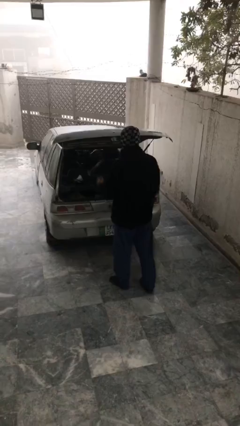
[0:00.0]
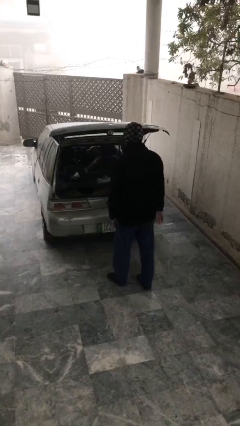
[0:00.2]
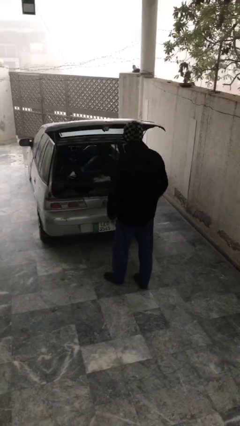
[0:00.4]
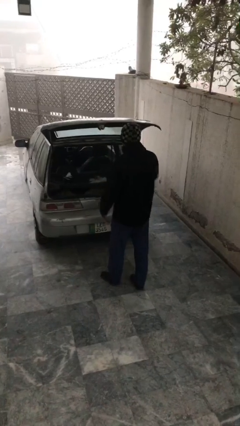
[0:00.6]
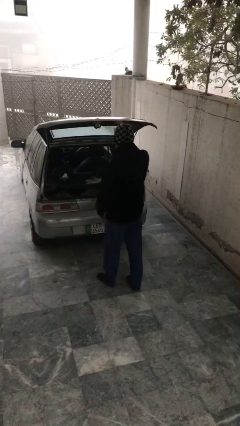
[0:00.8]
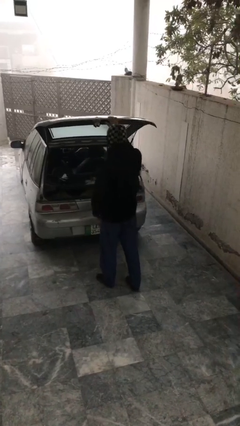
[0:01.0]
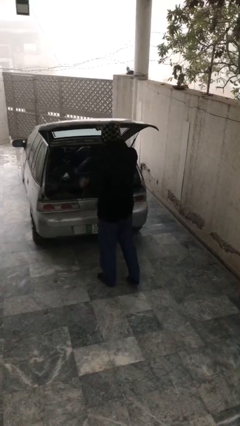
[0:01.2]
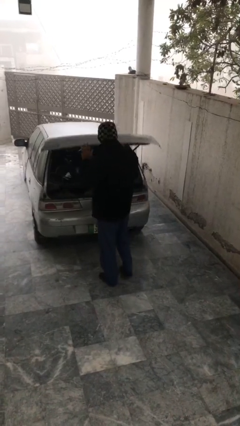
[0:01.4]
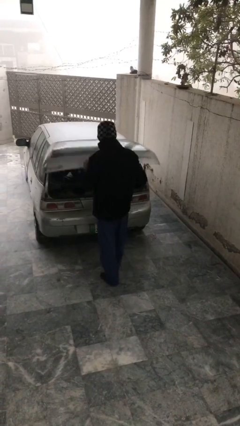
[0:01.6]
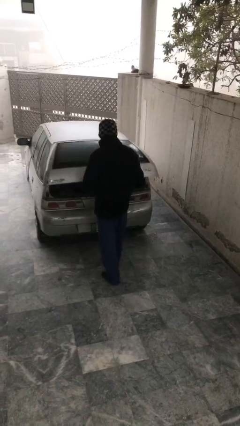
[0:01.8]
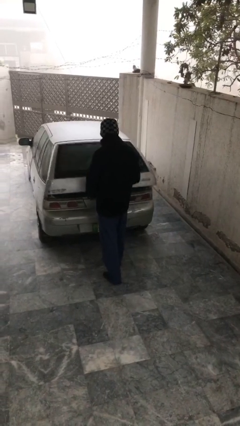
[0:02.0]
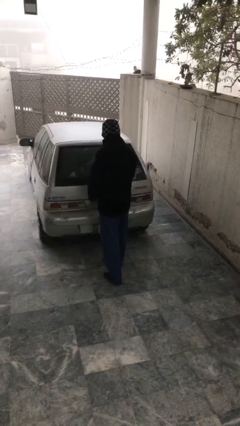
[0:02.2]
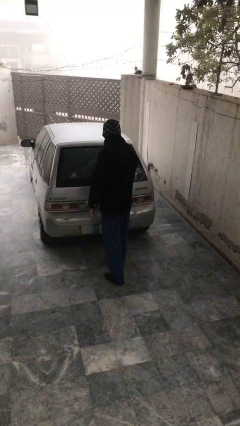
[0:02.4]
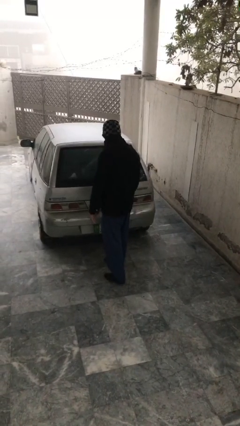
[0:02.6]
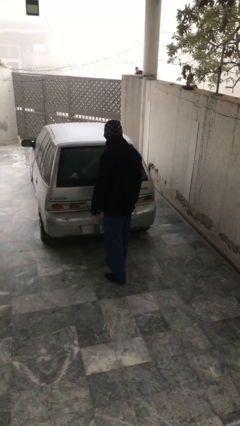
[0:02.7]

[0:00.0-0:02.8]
person closes car trunk

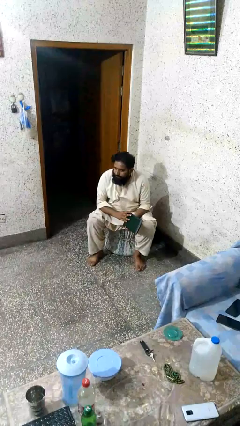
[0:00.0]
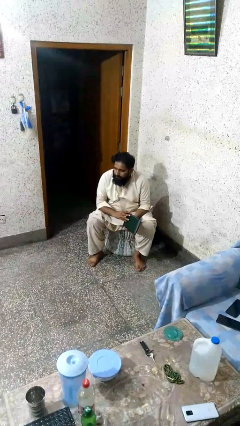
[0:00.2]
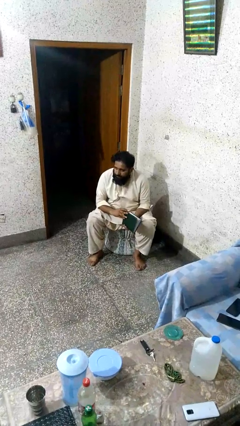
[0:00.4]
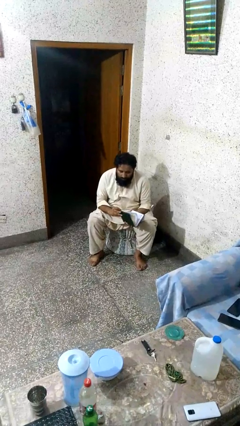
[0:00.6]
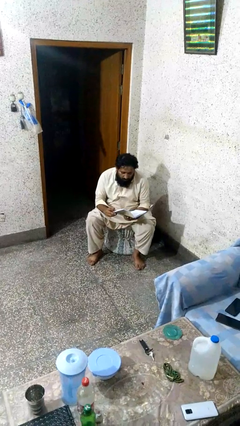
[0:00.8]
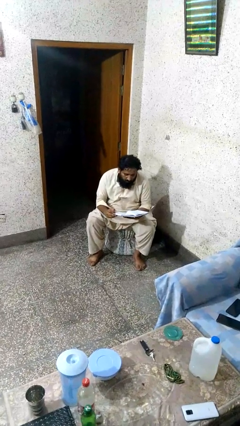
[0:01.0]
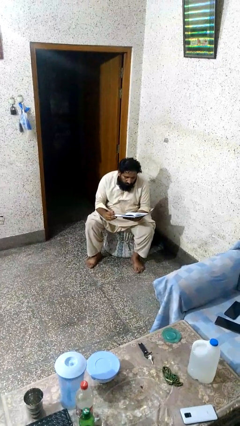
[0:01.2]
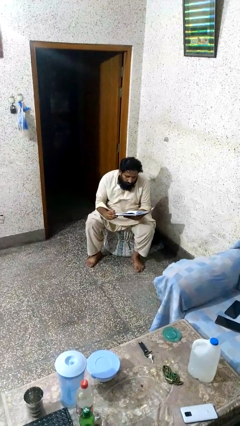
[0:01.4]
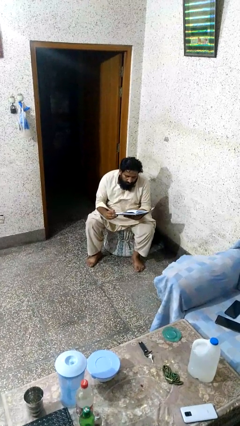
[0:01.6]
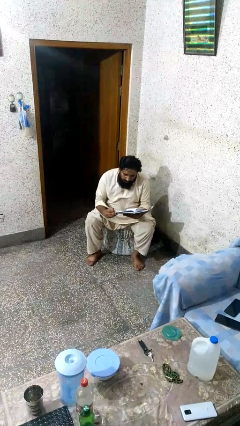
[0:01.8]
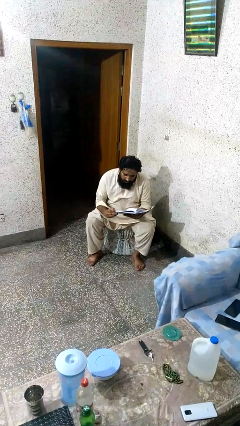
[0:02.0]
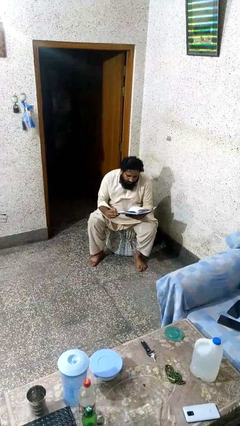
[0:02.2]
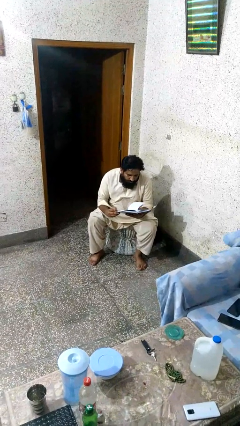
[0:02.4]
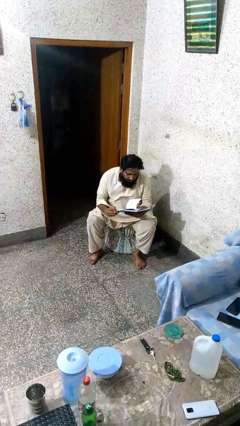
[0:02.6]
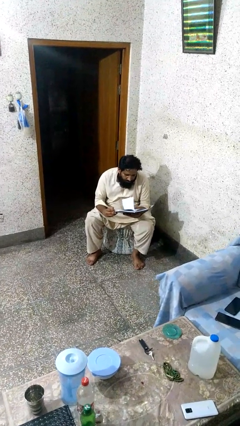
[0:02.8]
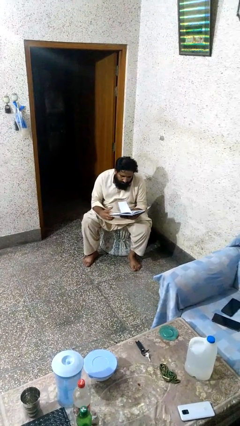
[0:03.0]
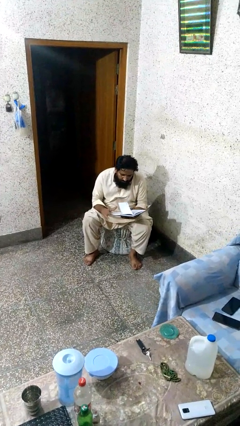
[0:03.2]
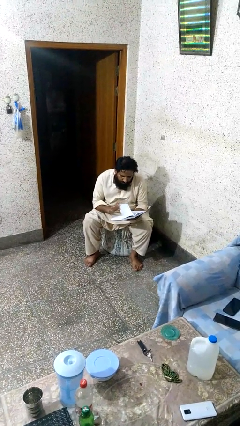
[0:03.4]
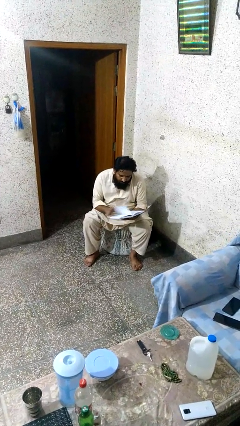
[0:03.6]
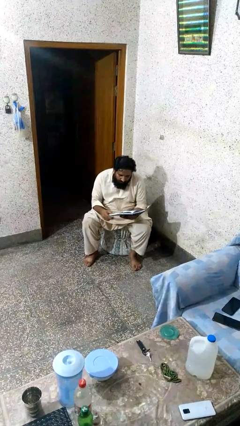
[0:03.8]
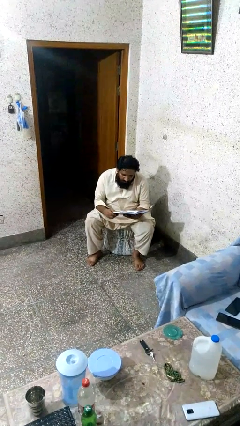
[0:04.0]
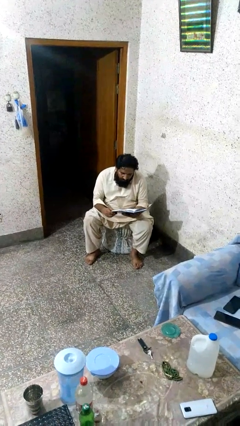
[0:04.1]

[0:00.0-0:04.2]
person reads book

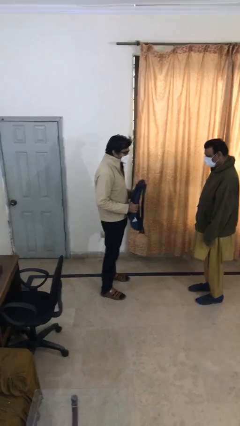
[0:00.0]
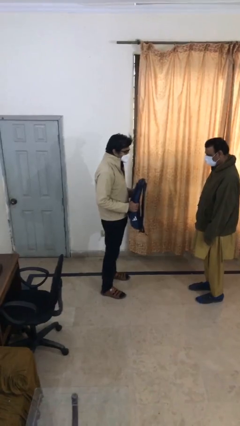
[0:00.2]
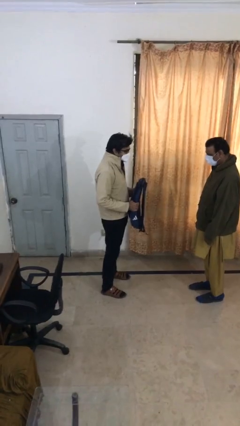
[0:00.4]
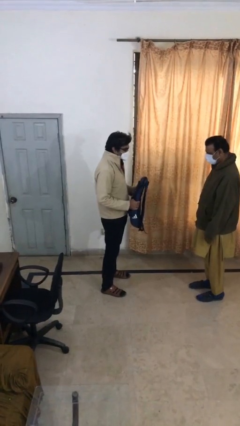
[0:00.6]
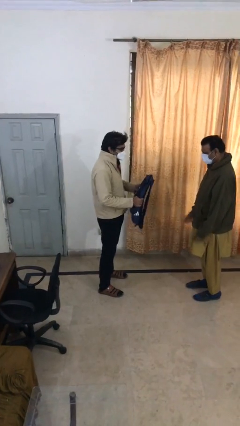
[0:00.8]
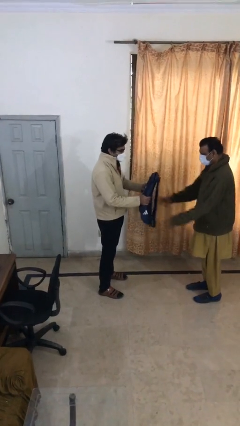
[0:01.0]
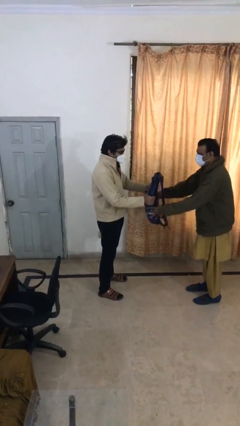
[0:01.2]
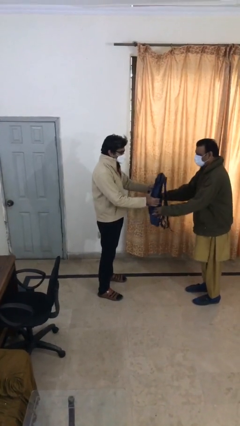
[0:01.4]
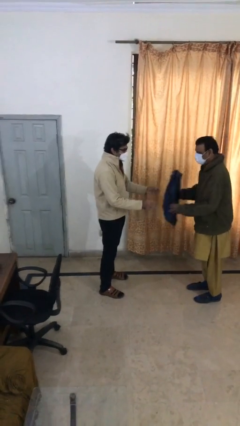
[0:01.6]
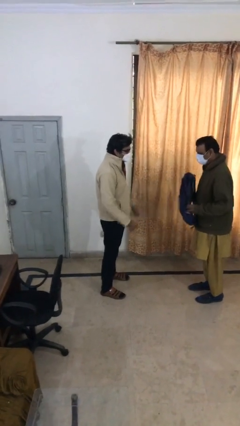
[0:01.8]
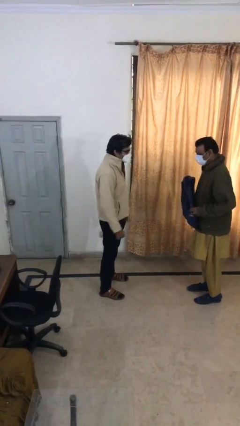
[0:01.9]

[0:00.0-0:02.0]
person transfers object to person

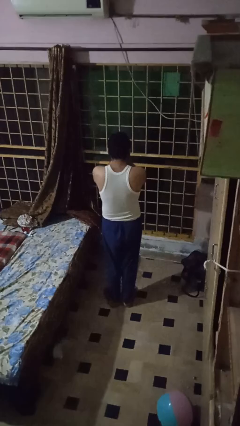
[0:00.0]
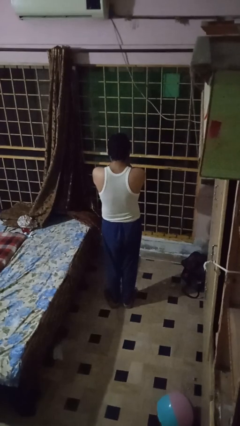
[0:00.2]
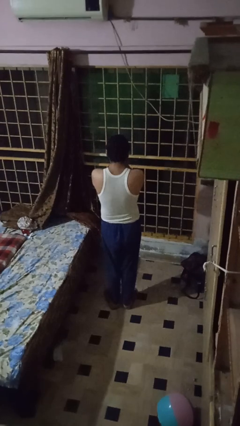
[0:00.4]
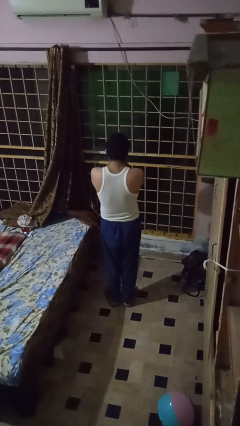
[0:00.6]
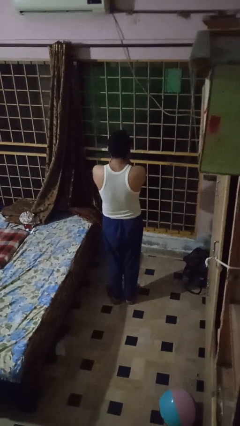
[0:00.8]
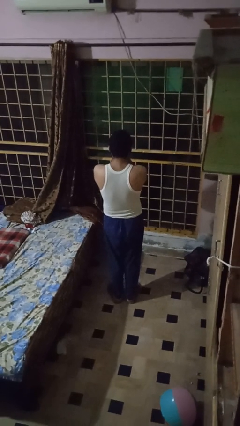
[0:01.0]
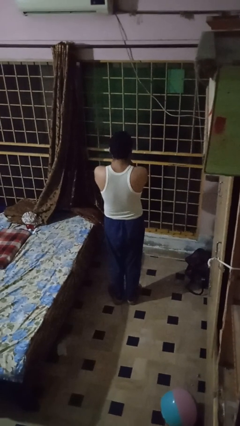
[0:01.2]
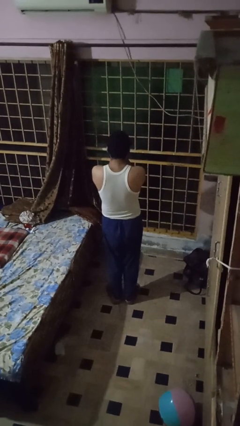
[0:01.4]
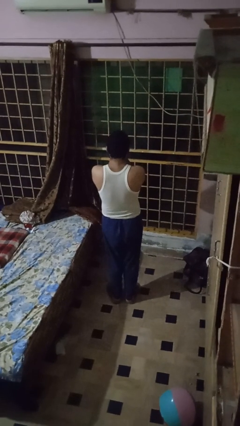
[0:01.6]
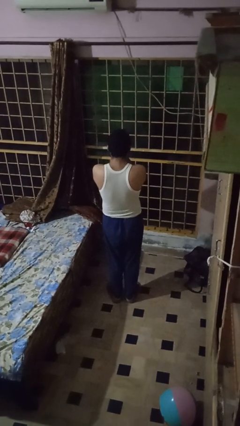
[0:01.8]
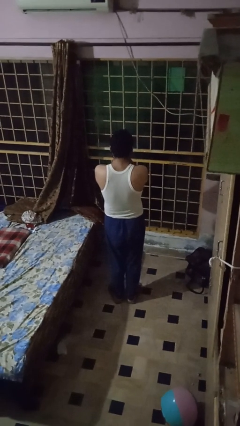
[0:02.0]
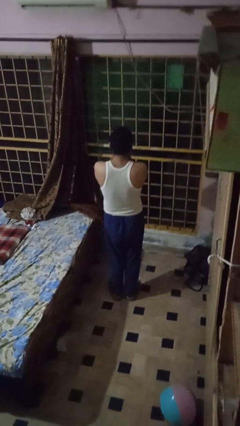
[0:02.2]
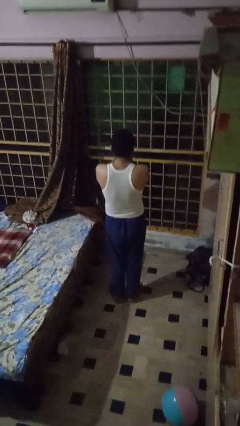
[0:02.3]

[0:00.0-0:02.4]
person covers face with hands

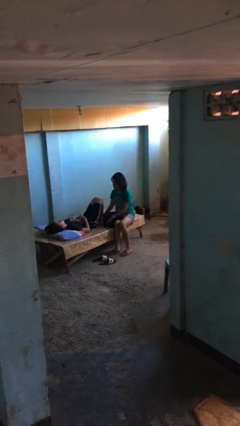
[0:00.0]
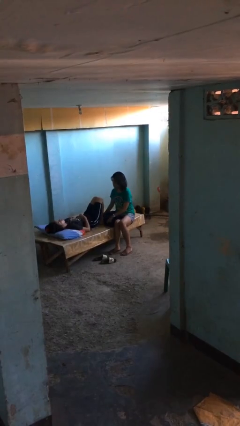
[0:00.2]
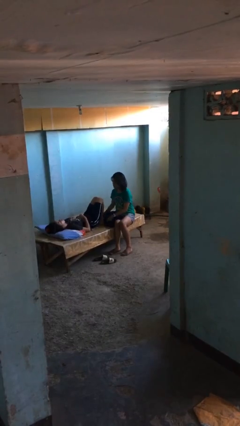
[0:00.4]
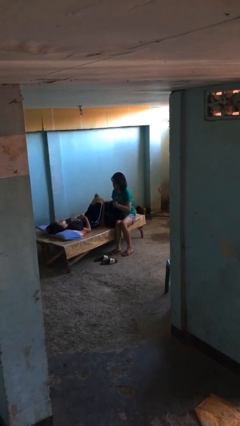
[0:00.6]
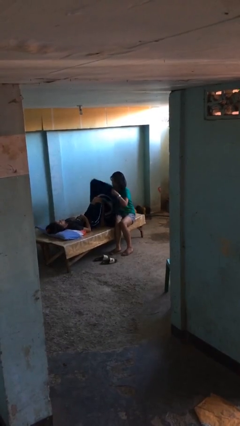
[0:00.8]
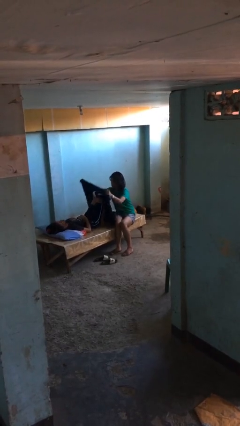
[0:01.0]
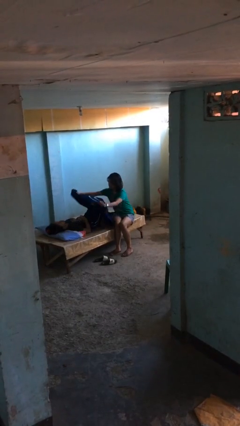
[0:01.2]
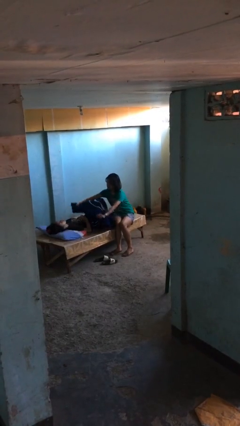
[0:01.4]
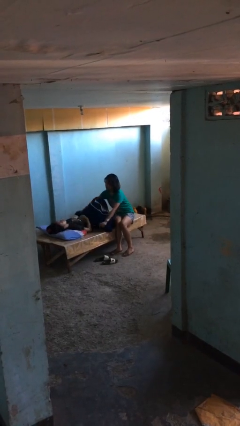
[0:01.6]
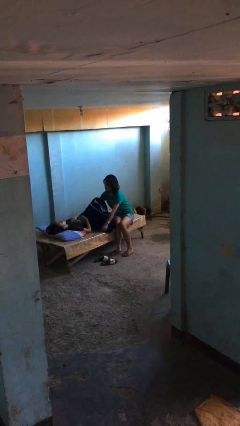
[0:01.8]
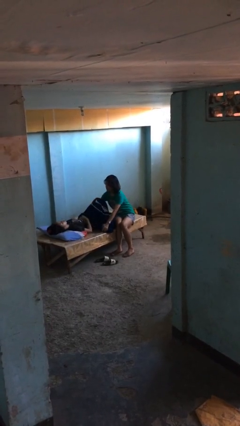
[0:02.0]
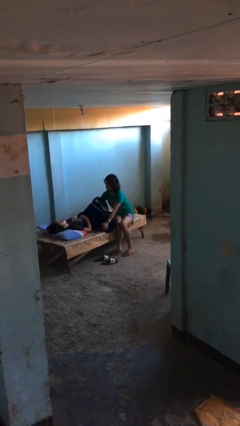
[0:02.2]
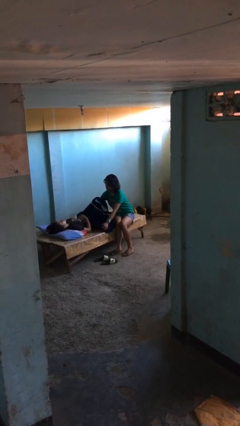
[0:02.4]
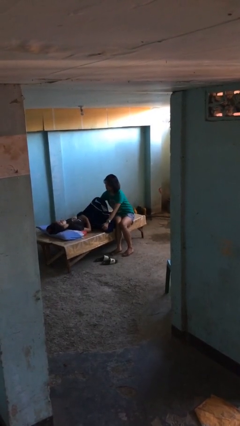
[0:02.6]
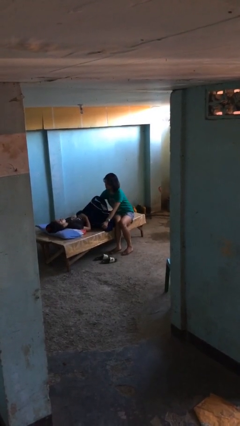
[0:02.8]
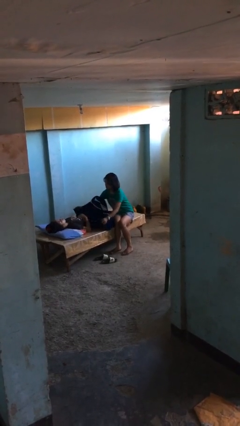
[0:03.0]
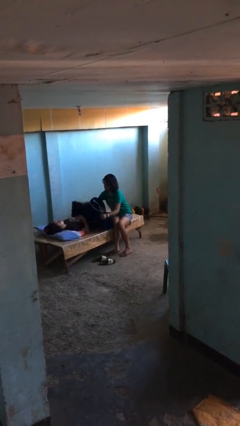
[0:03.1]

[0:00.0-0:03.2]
person covers friend with blanket

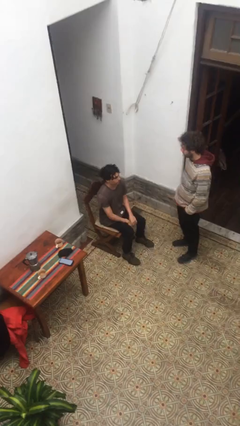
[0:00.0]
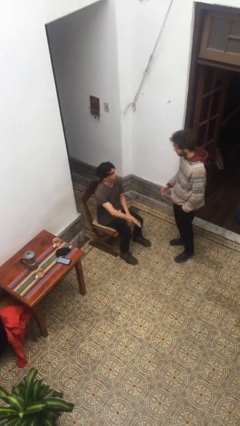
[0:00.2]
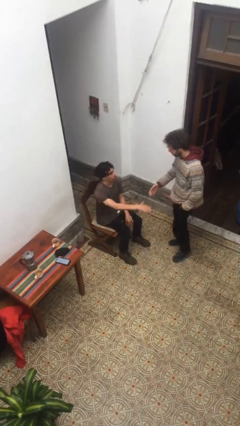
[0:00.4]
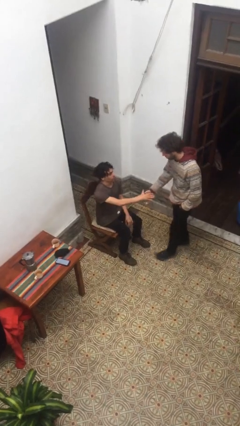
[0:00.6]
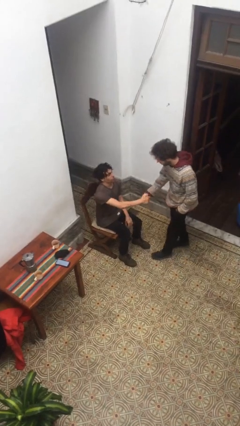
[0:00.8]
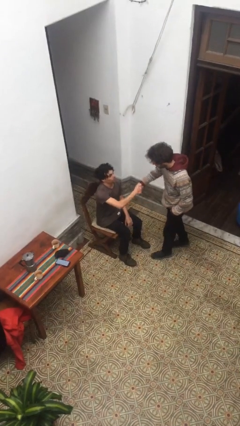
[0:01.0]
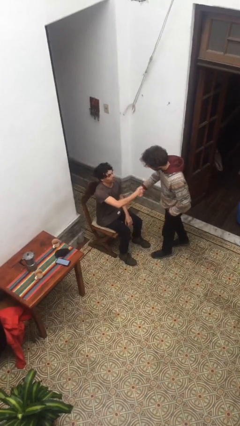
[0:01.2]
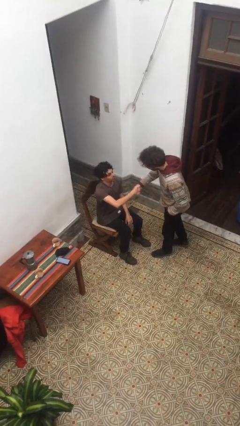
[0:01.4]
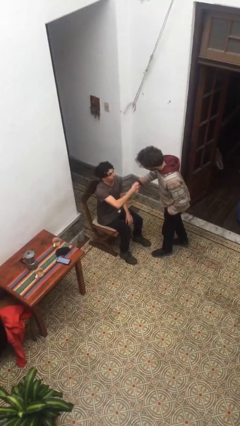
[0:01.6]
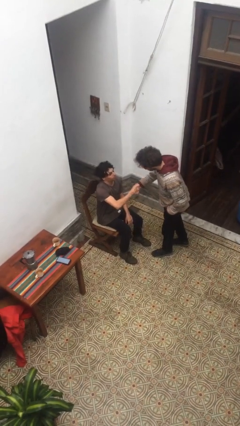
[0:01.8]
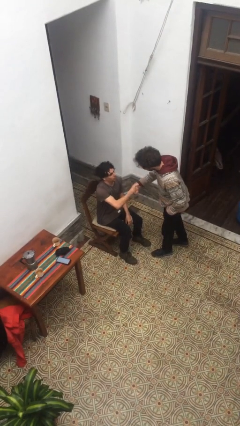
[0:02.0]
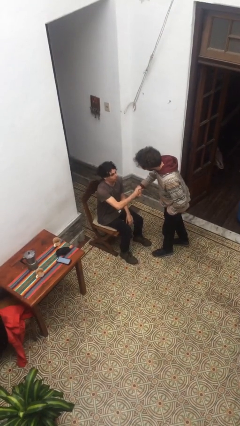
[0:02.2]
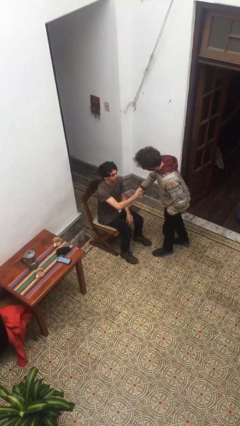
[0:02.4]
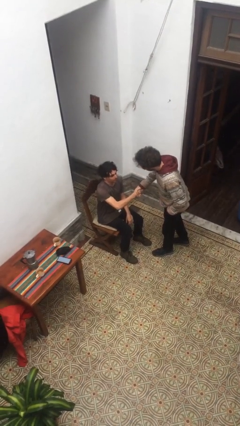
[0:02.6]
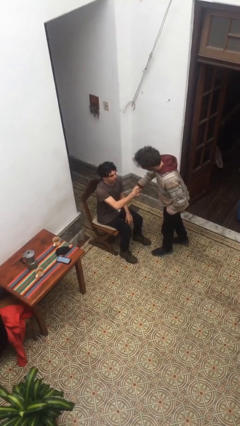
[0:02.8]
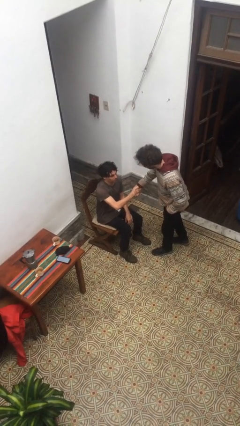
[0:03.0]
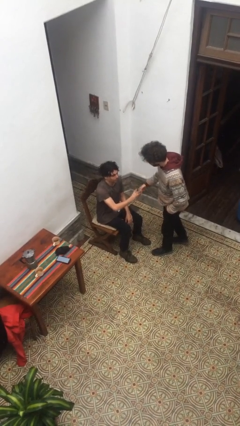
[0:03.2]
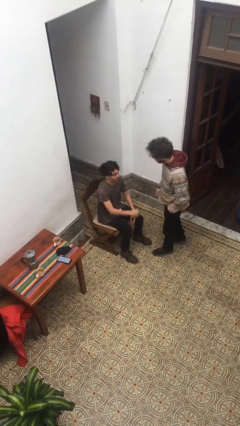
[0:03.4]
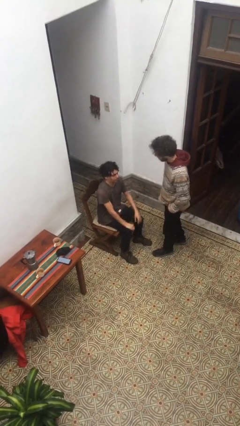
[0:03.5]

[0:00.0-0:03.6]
person shakes hand
